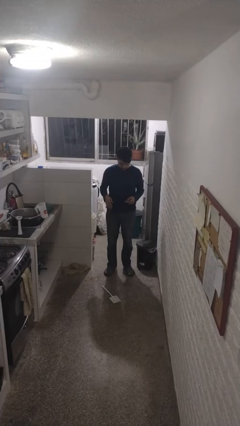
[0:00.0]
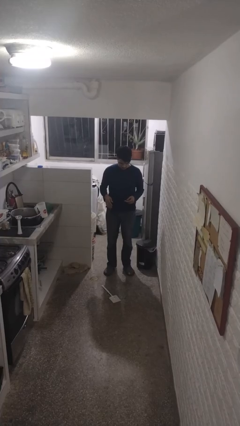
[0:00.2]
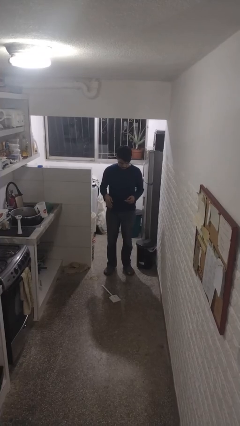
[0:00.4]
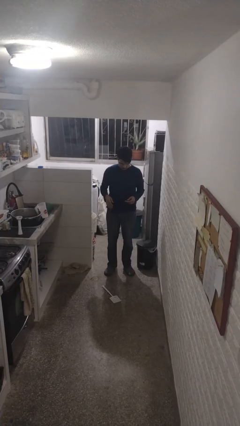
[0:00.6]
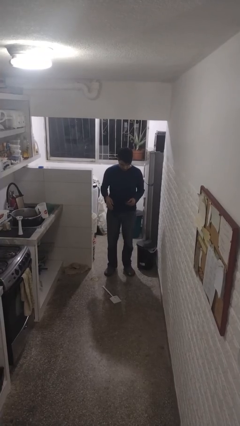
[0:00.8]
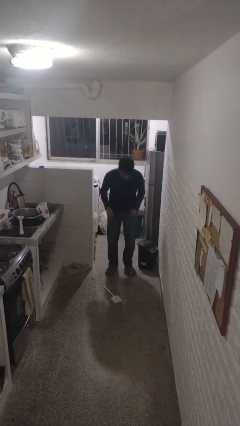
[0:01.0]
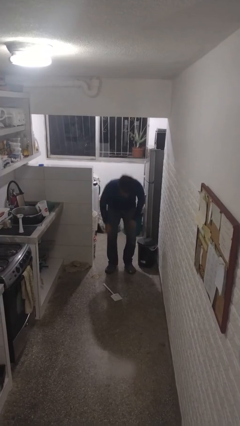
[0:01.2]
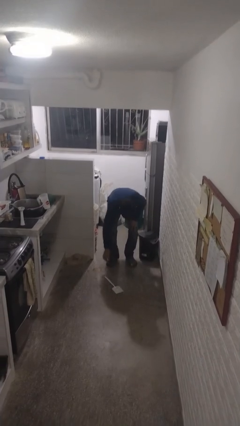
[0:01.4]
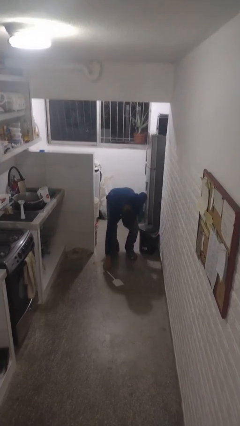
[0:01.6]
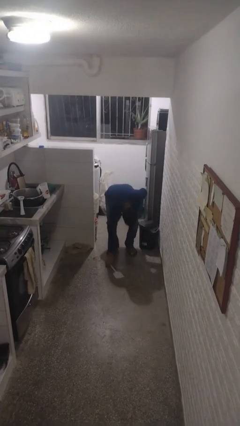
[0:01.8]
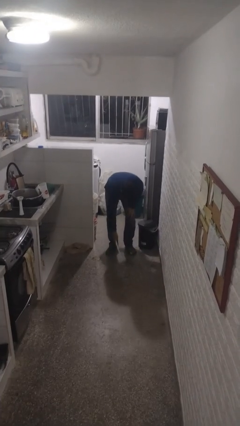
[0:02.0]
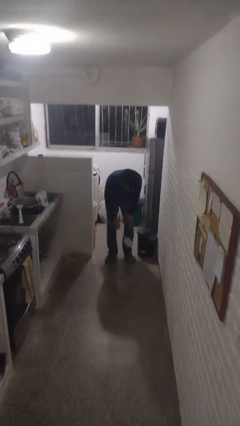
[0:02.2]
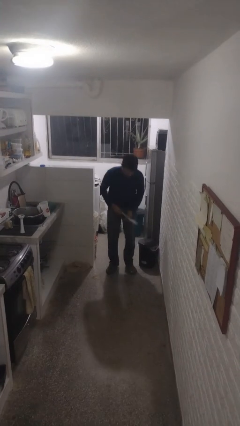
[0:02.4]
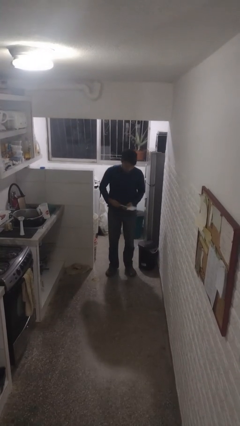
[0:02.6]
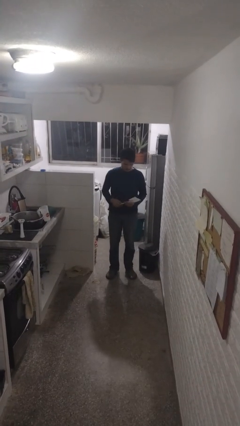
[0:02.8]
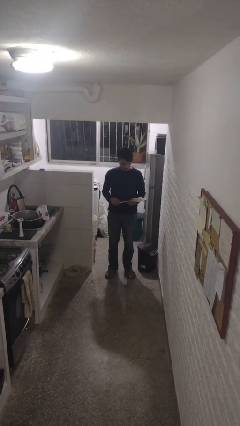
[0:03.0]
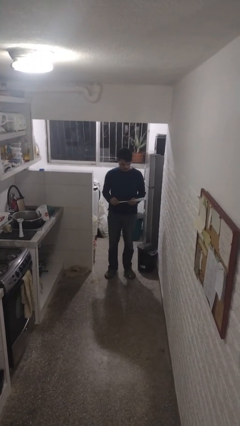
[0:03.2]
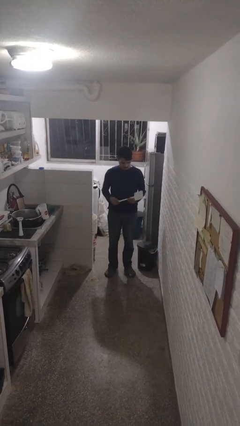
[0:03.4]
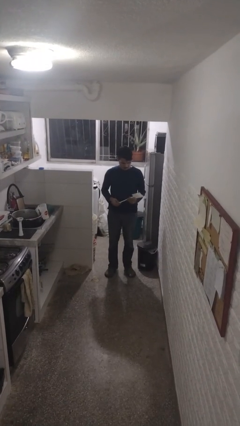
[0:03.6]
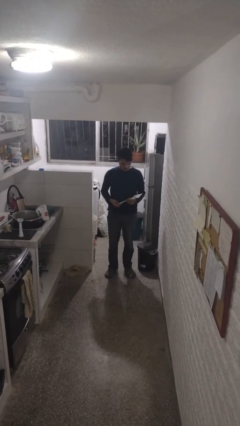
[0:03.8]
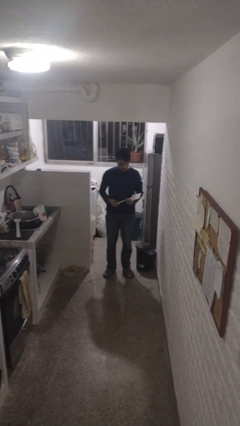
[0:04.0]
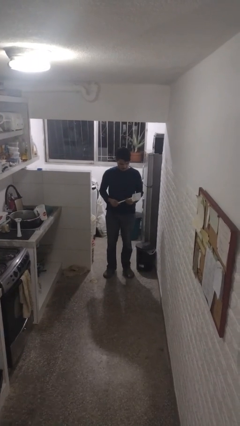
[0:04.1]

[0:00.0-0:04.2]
person picks up object from floor

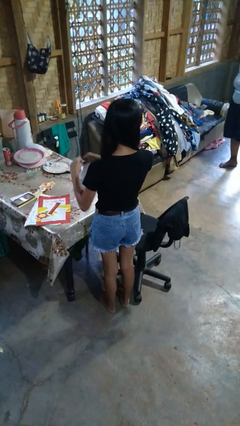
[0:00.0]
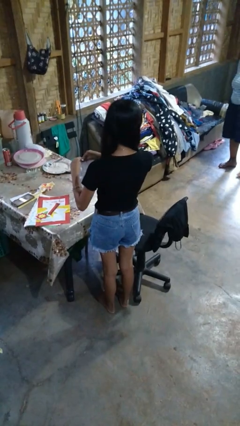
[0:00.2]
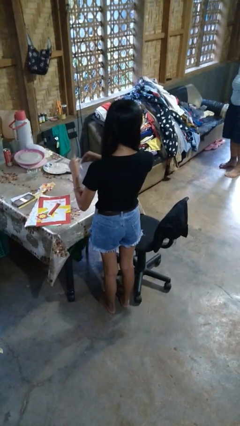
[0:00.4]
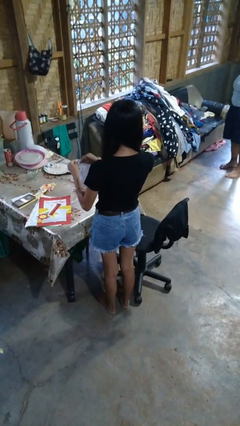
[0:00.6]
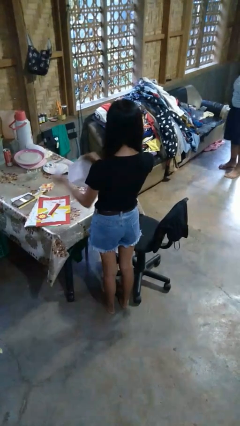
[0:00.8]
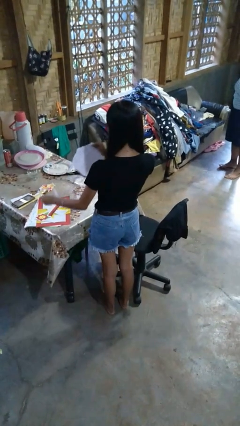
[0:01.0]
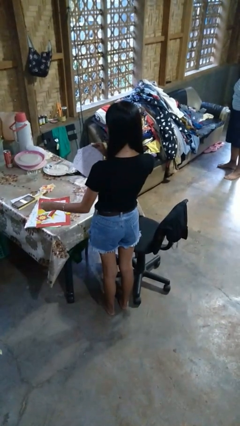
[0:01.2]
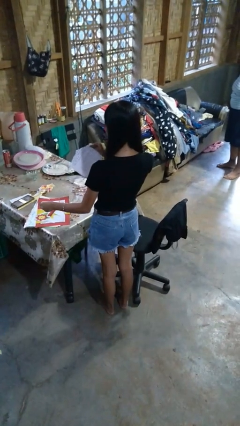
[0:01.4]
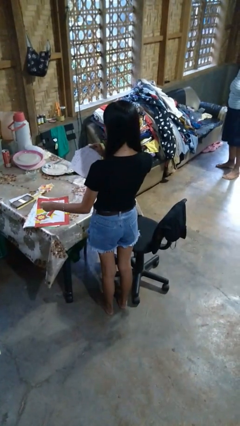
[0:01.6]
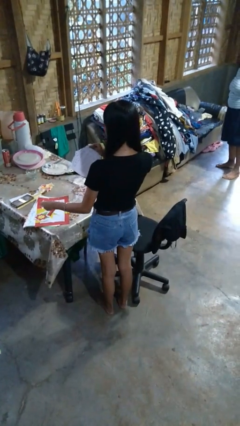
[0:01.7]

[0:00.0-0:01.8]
person tears paper

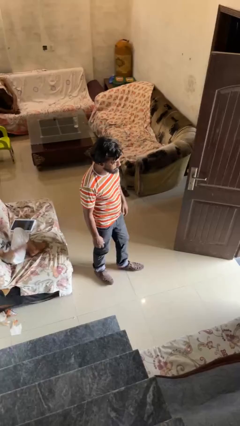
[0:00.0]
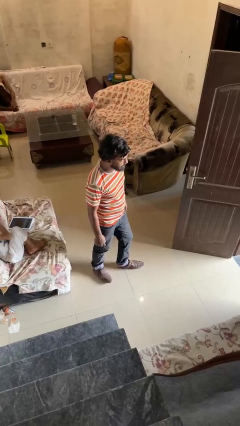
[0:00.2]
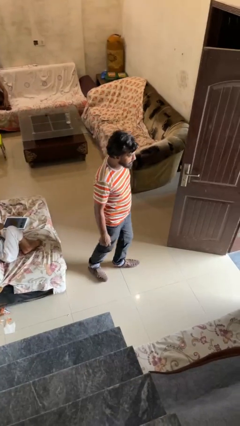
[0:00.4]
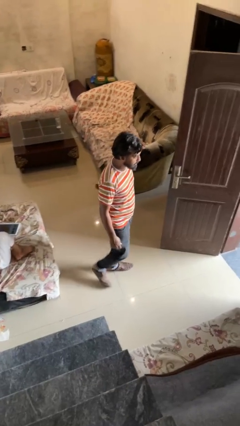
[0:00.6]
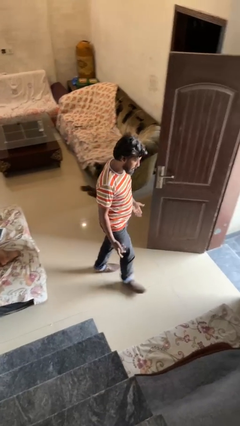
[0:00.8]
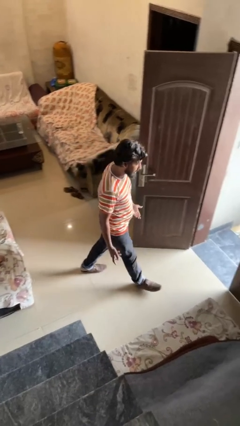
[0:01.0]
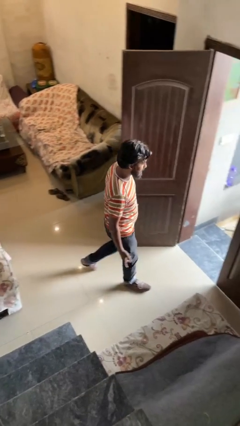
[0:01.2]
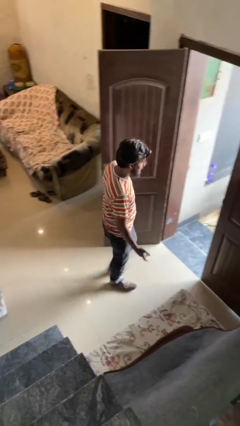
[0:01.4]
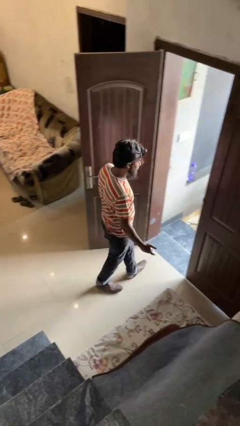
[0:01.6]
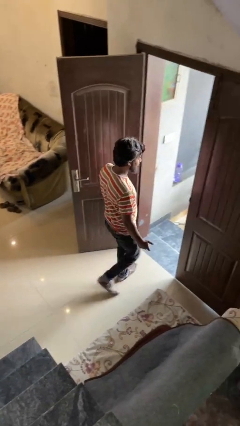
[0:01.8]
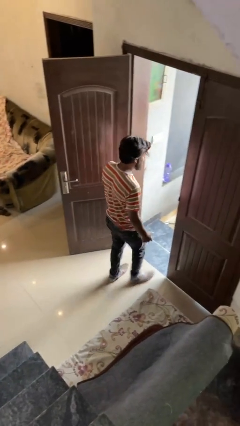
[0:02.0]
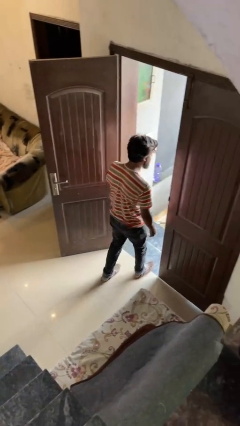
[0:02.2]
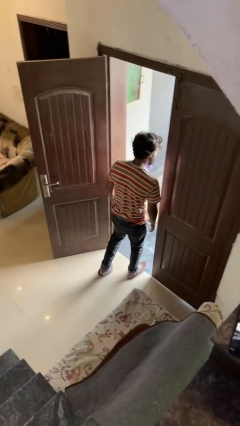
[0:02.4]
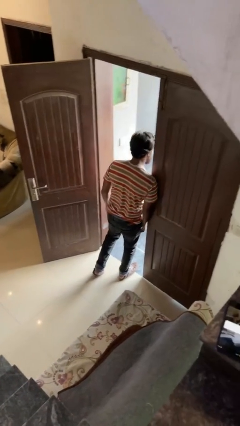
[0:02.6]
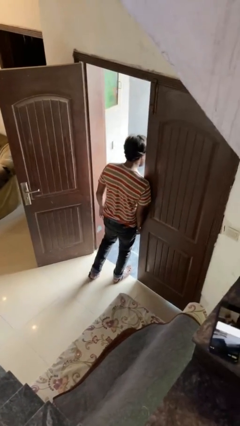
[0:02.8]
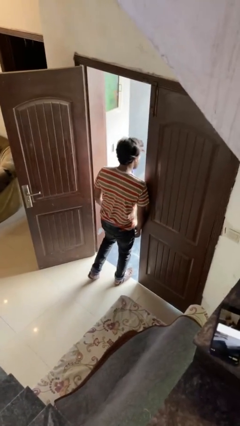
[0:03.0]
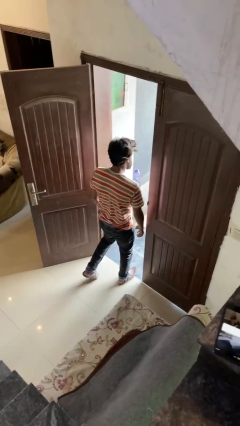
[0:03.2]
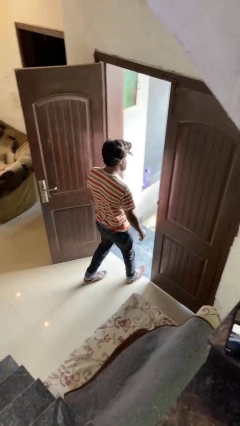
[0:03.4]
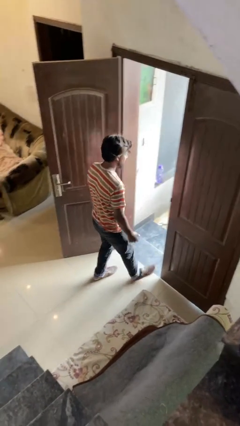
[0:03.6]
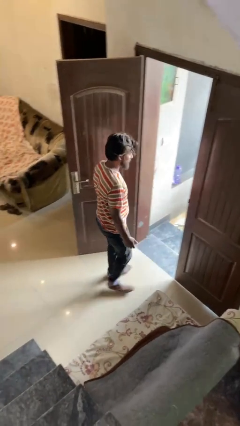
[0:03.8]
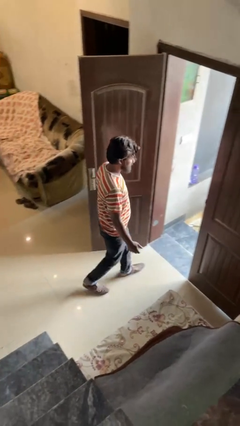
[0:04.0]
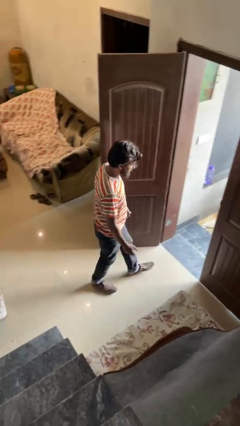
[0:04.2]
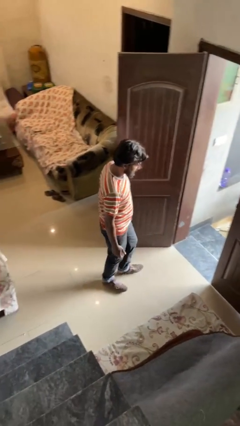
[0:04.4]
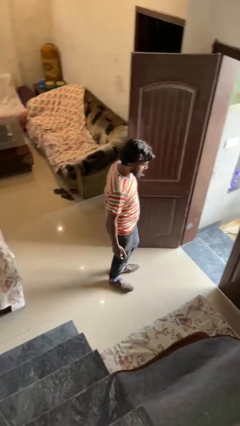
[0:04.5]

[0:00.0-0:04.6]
person bumps into wall

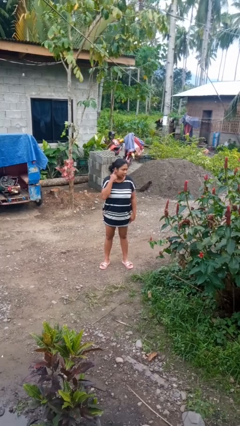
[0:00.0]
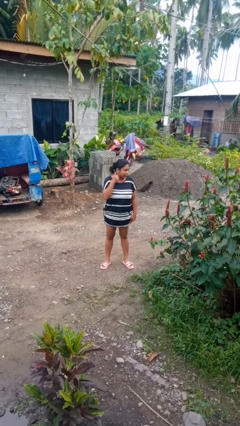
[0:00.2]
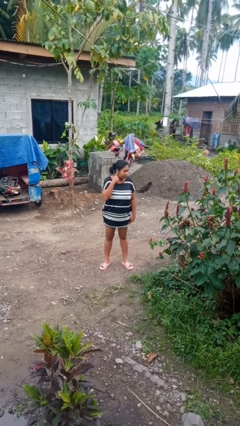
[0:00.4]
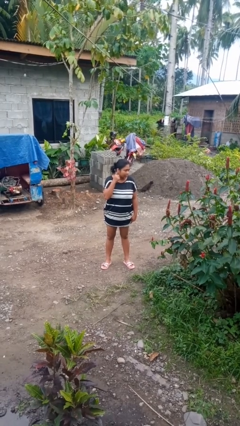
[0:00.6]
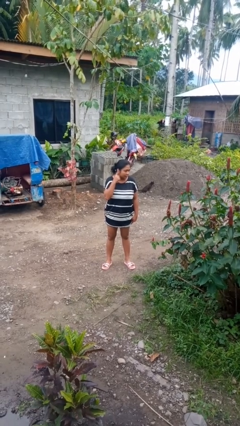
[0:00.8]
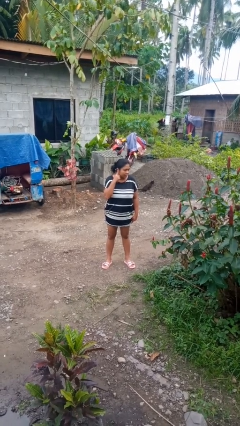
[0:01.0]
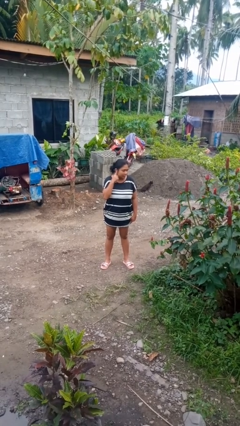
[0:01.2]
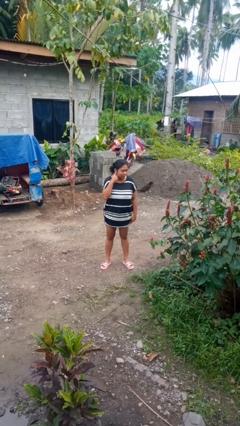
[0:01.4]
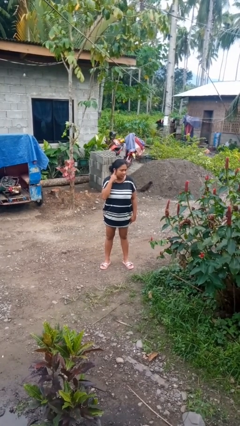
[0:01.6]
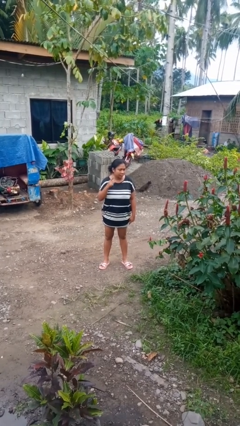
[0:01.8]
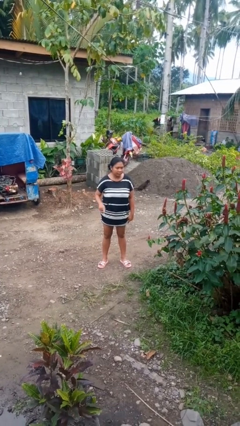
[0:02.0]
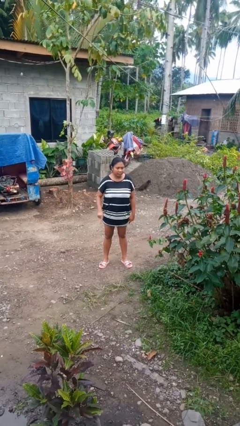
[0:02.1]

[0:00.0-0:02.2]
person gestures listen closely

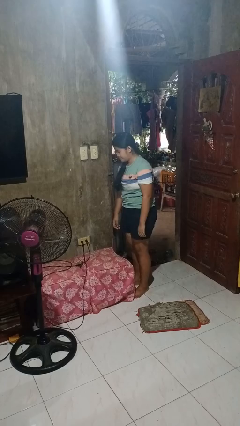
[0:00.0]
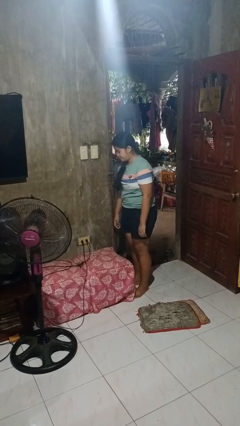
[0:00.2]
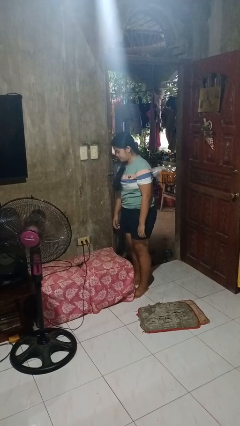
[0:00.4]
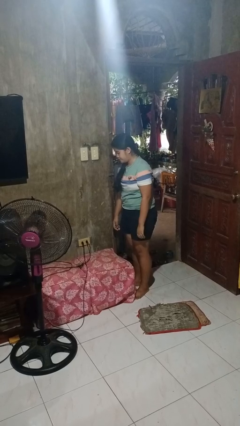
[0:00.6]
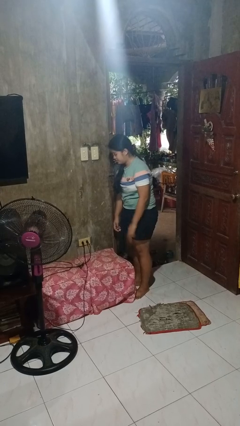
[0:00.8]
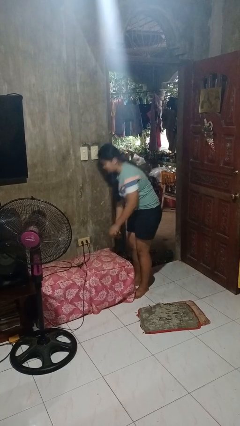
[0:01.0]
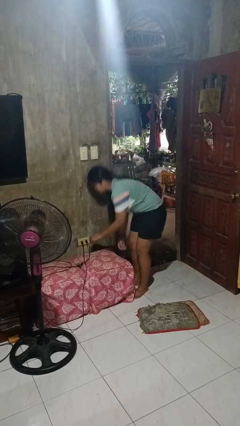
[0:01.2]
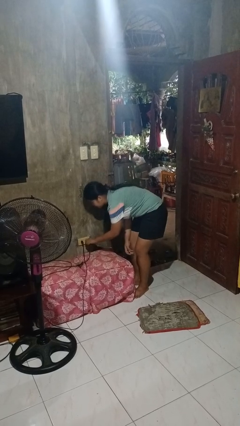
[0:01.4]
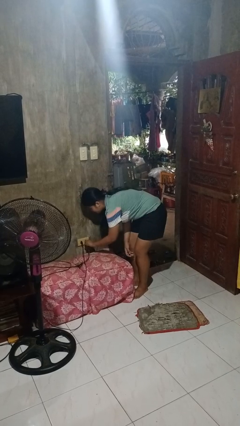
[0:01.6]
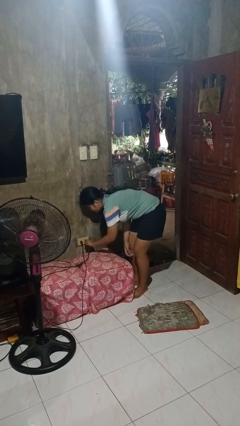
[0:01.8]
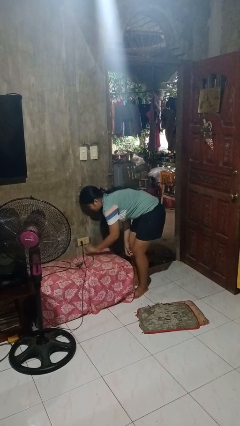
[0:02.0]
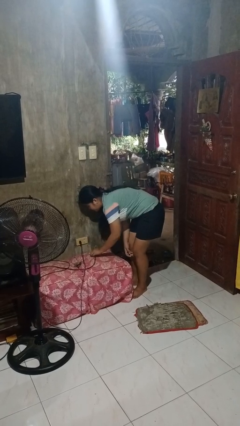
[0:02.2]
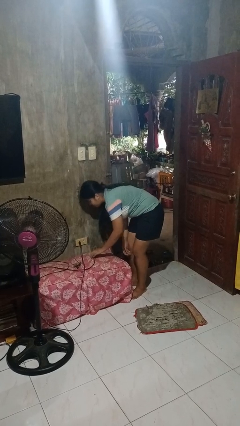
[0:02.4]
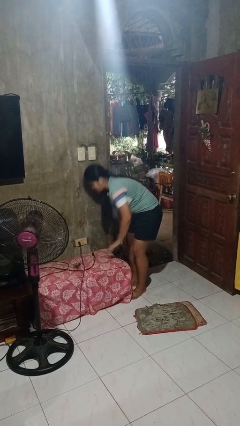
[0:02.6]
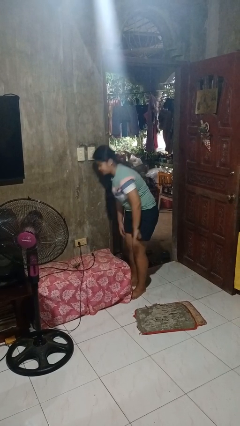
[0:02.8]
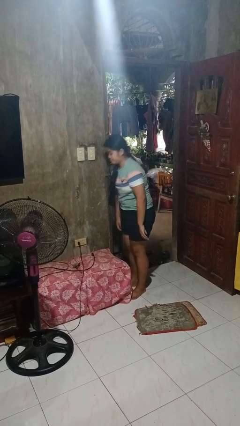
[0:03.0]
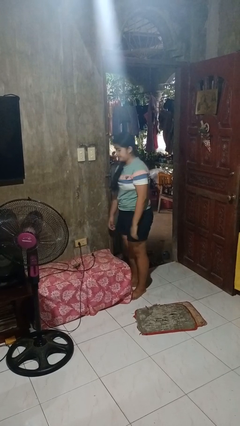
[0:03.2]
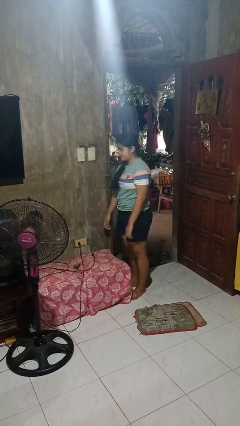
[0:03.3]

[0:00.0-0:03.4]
person unplugs from electrical socket

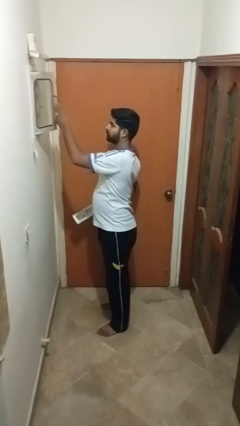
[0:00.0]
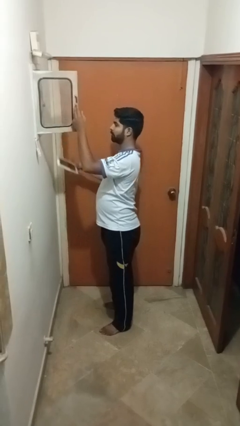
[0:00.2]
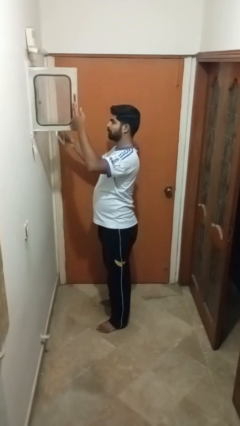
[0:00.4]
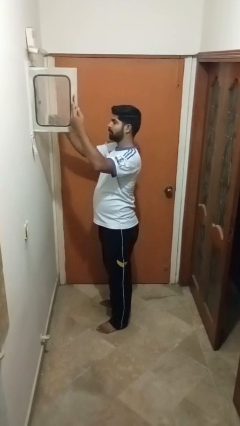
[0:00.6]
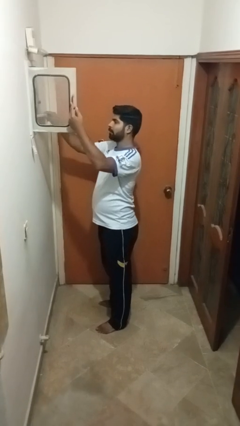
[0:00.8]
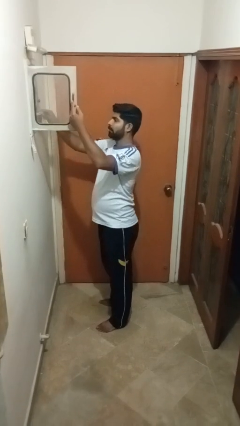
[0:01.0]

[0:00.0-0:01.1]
person takes letters from mailbox
